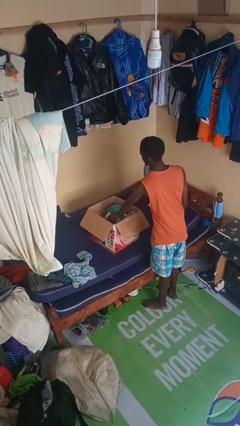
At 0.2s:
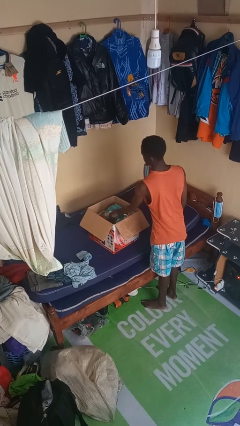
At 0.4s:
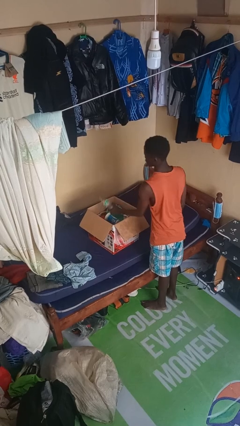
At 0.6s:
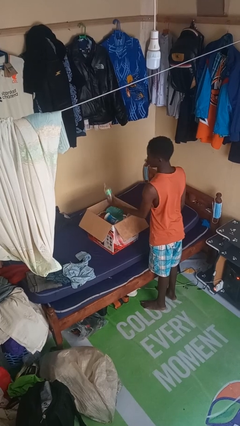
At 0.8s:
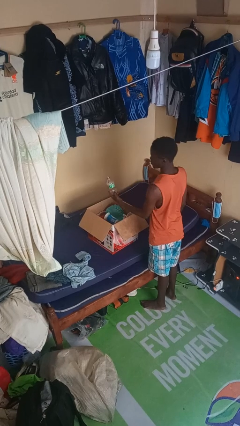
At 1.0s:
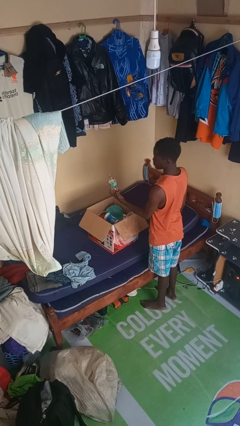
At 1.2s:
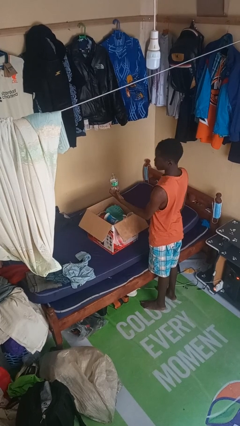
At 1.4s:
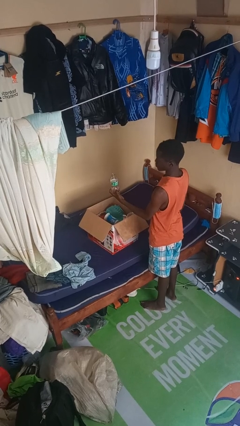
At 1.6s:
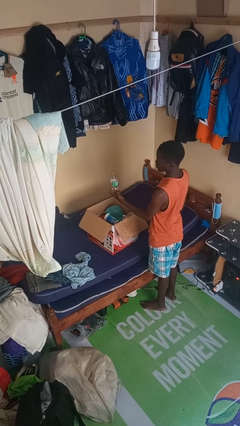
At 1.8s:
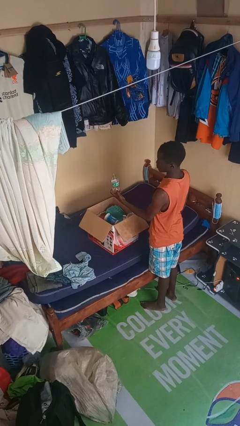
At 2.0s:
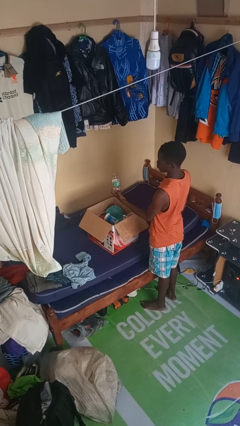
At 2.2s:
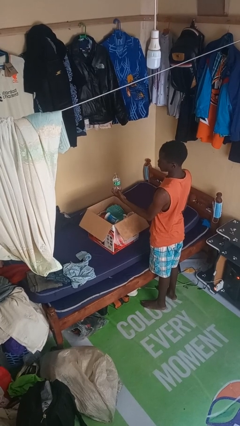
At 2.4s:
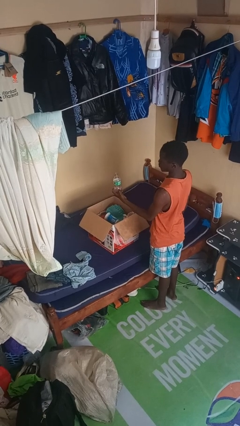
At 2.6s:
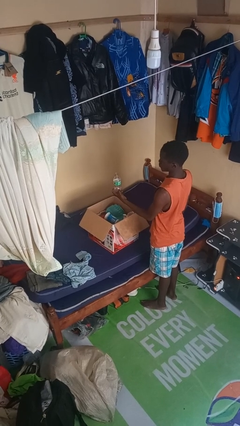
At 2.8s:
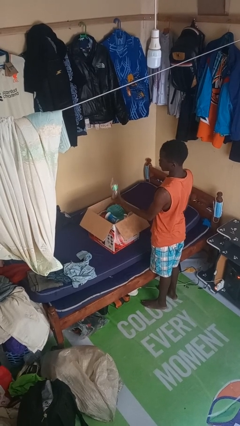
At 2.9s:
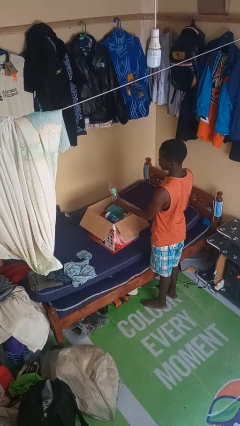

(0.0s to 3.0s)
person takes object from box

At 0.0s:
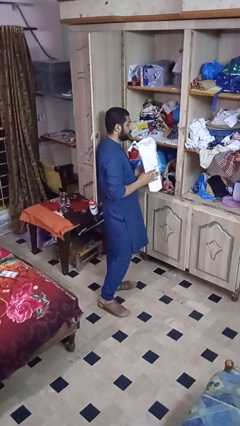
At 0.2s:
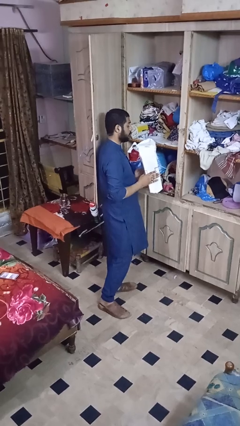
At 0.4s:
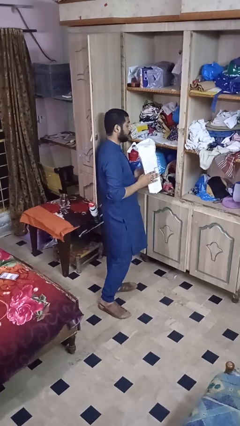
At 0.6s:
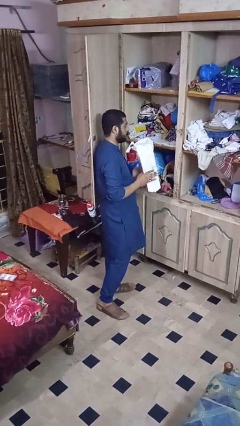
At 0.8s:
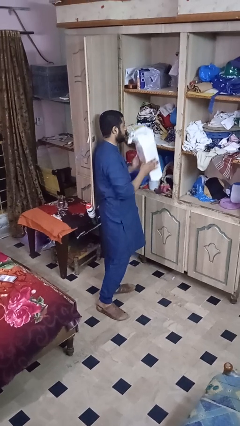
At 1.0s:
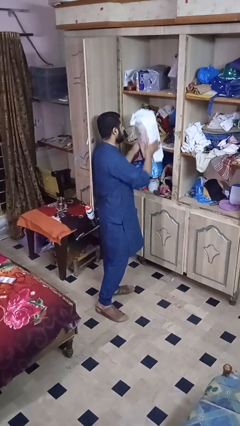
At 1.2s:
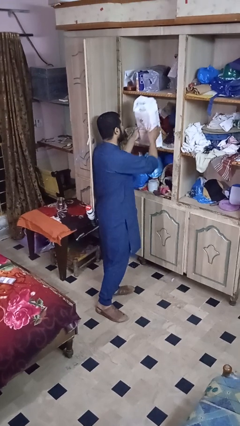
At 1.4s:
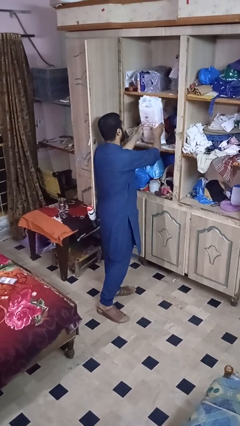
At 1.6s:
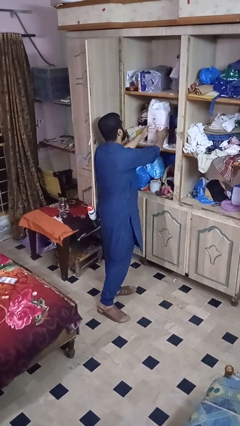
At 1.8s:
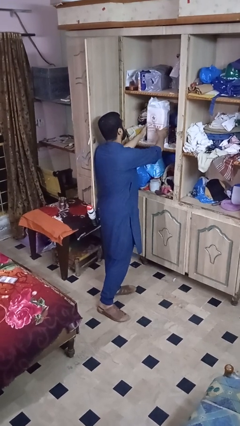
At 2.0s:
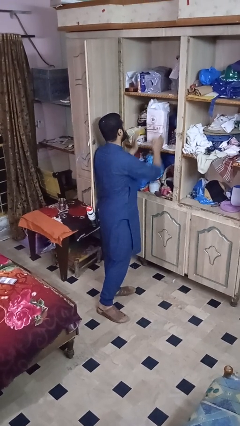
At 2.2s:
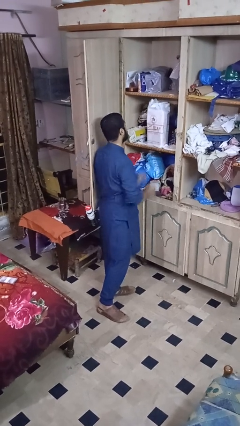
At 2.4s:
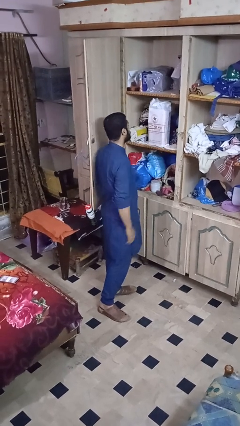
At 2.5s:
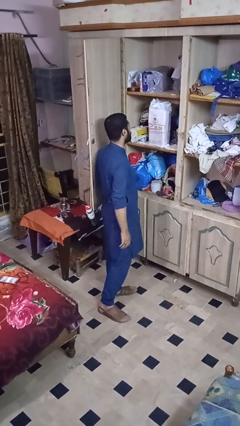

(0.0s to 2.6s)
person puts down object into cabinet

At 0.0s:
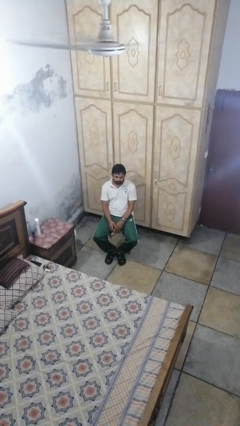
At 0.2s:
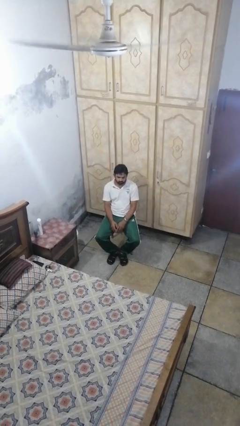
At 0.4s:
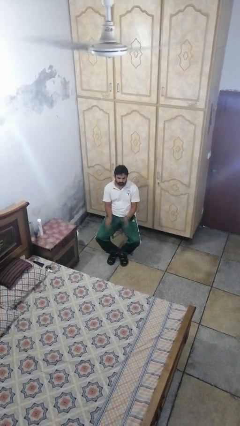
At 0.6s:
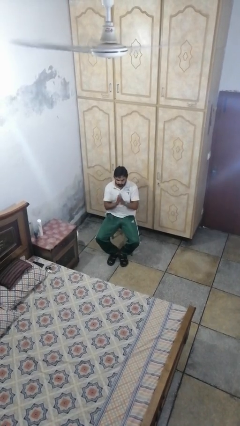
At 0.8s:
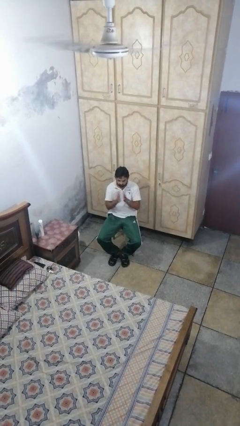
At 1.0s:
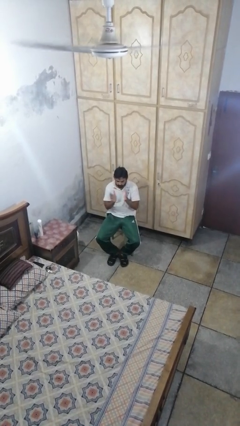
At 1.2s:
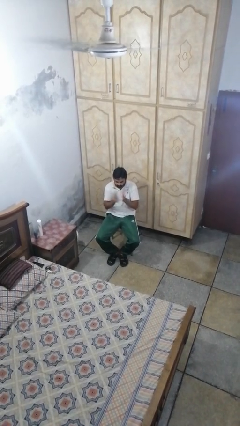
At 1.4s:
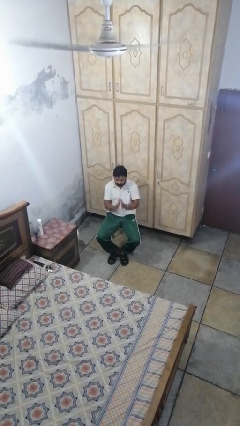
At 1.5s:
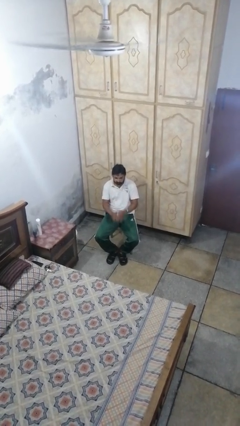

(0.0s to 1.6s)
person claps hands

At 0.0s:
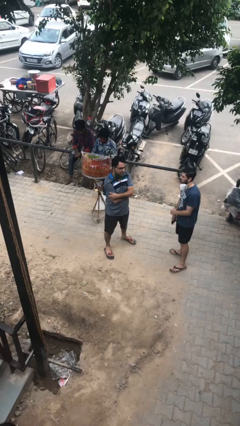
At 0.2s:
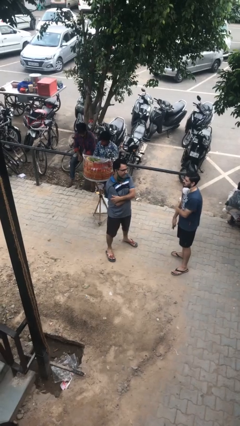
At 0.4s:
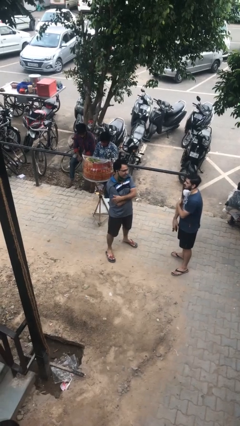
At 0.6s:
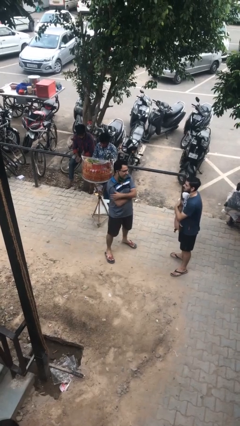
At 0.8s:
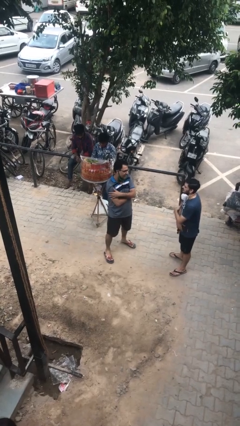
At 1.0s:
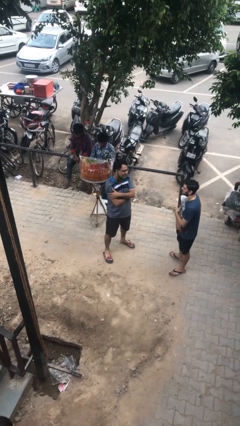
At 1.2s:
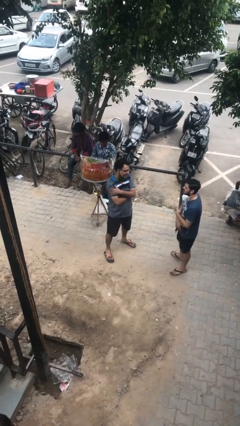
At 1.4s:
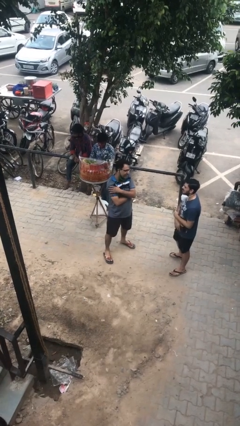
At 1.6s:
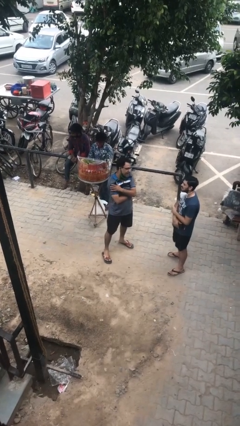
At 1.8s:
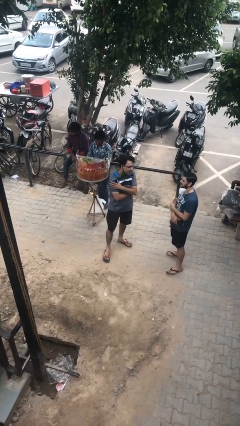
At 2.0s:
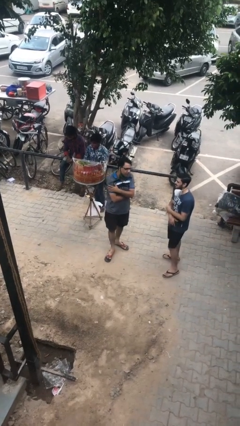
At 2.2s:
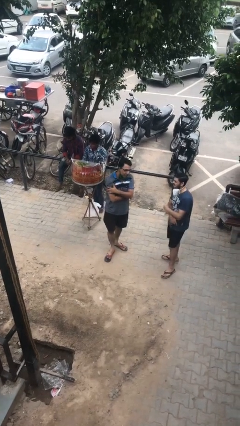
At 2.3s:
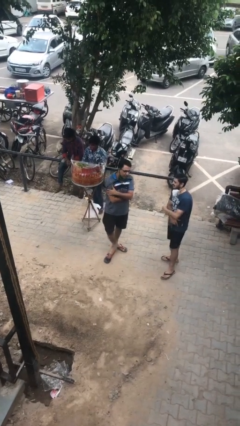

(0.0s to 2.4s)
person laughs with person

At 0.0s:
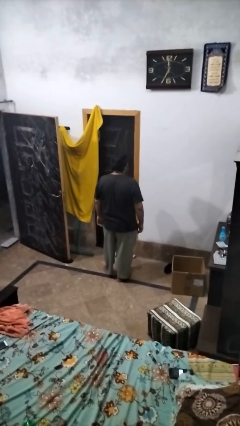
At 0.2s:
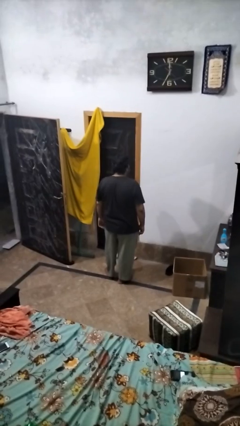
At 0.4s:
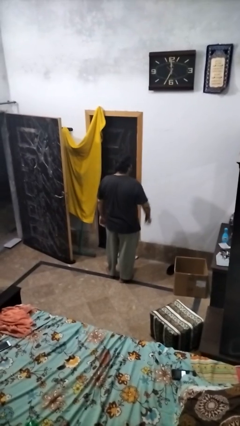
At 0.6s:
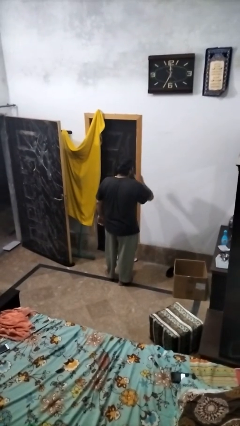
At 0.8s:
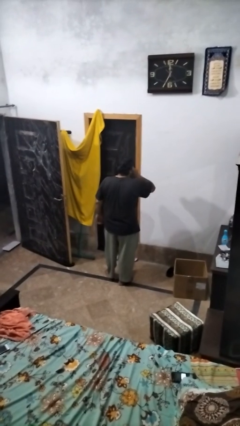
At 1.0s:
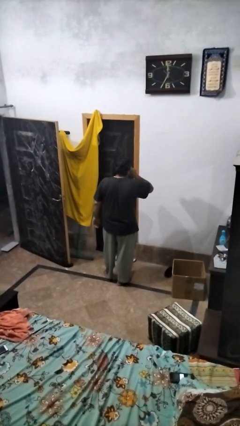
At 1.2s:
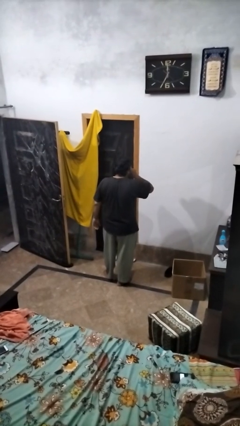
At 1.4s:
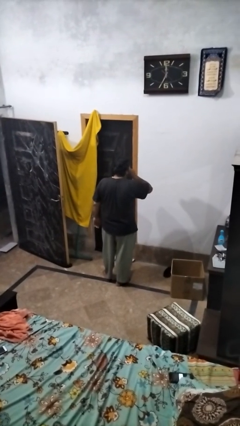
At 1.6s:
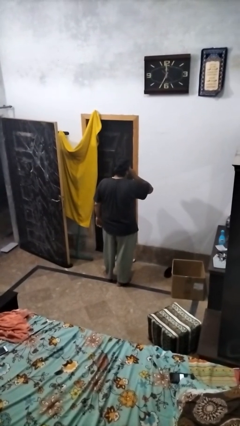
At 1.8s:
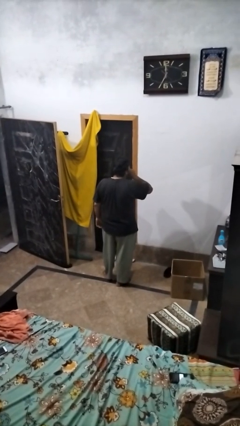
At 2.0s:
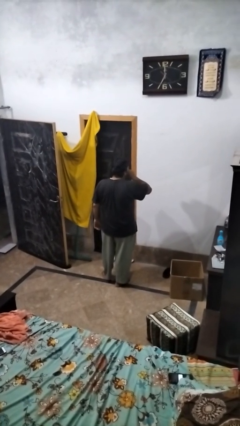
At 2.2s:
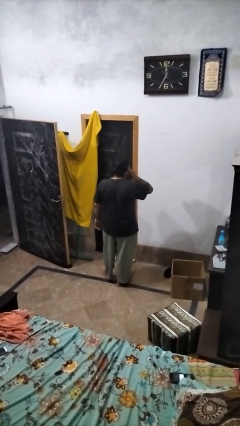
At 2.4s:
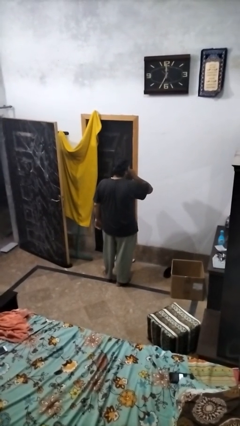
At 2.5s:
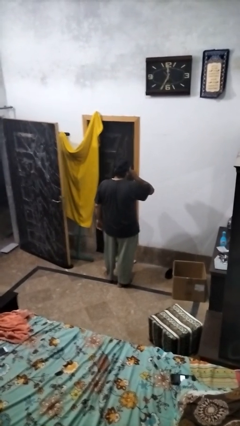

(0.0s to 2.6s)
person gestures be quiet

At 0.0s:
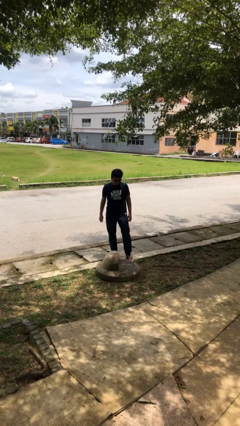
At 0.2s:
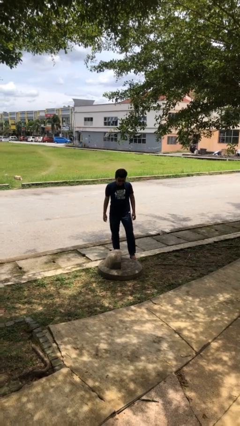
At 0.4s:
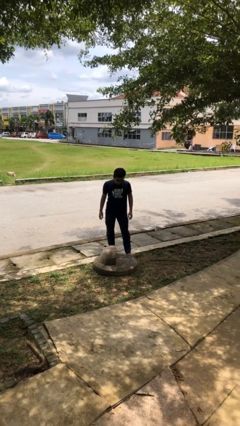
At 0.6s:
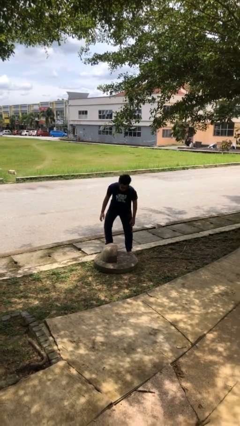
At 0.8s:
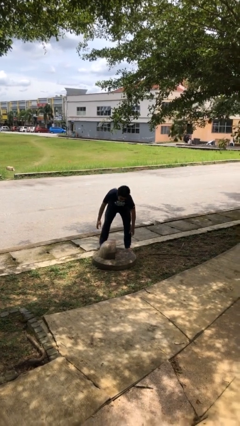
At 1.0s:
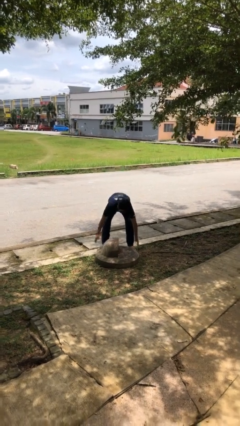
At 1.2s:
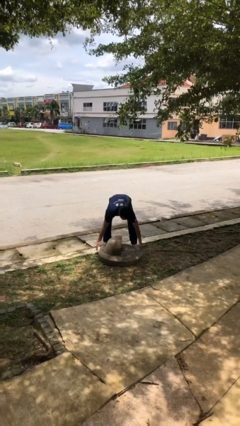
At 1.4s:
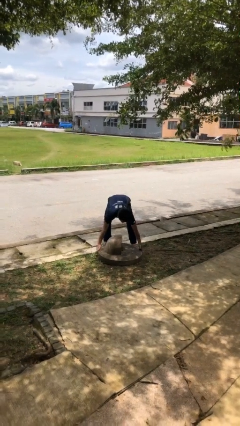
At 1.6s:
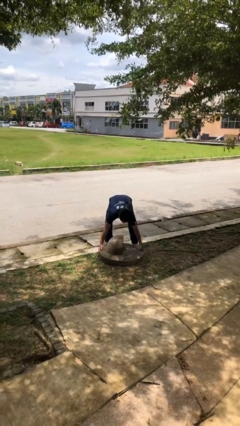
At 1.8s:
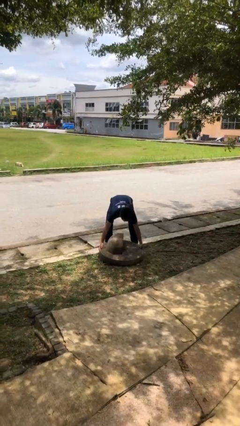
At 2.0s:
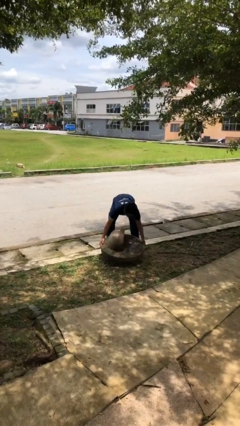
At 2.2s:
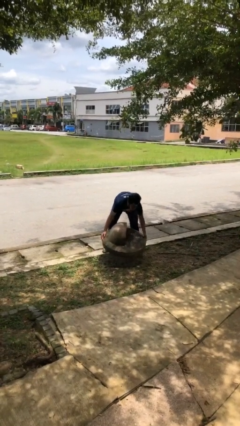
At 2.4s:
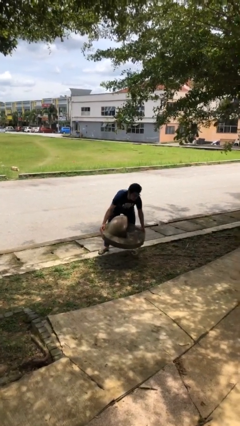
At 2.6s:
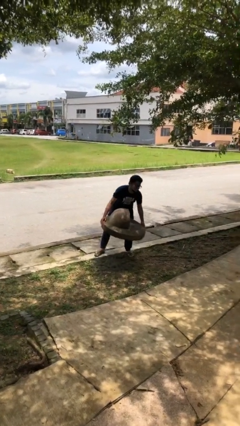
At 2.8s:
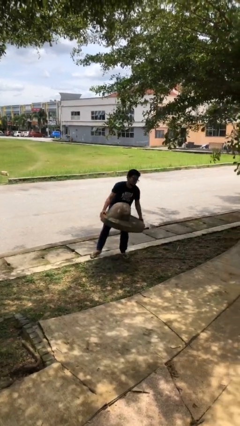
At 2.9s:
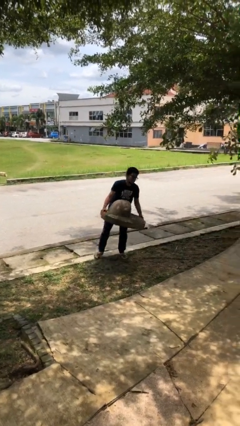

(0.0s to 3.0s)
person picks up object from floor

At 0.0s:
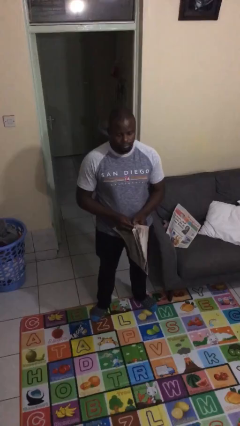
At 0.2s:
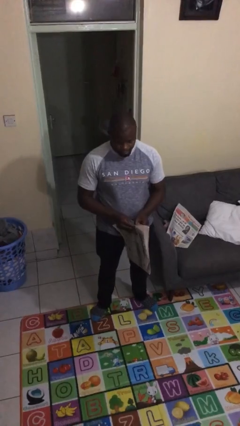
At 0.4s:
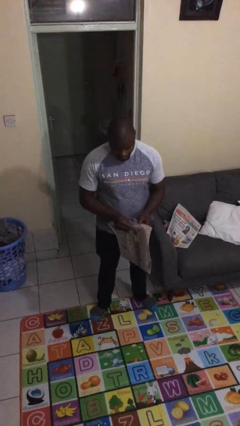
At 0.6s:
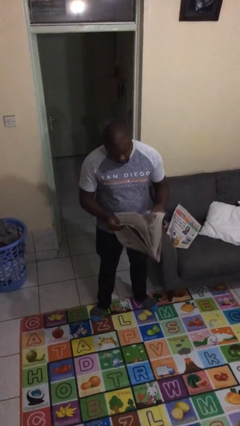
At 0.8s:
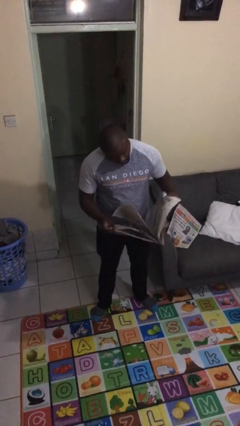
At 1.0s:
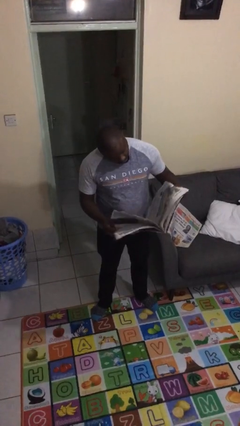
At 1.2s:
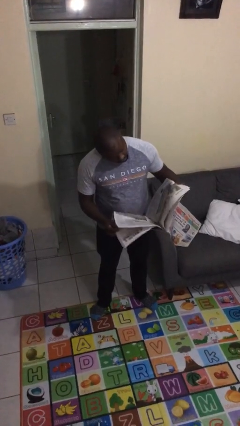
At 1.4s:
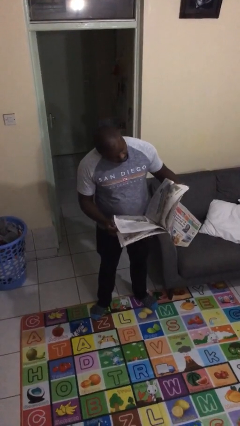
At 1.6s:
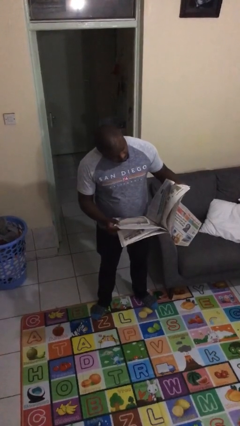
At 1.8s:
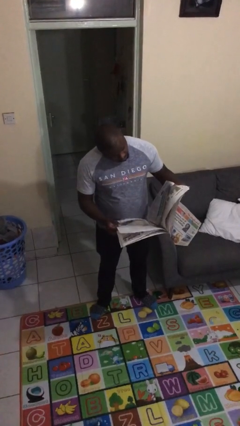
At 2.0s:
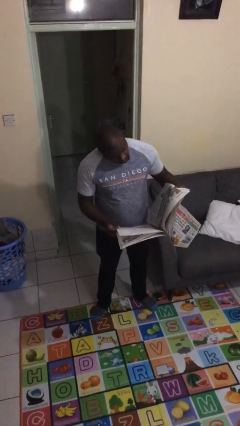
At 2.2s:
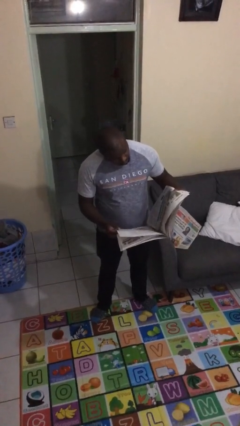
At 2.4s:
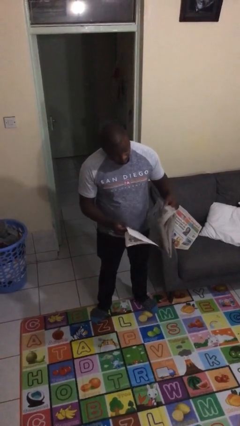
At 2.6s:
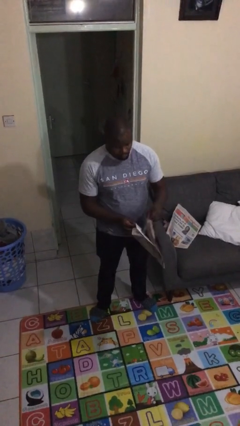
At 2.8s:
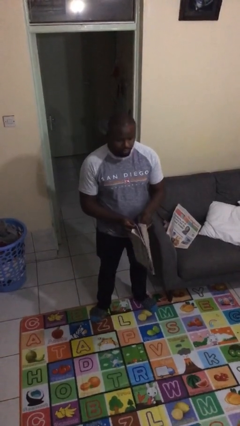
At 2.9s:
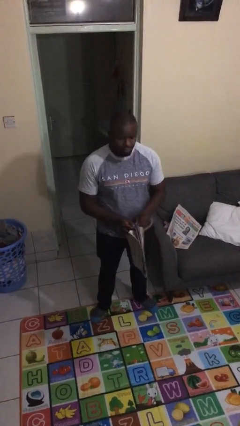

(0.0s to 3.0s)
person reads newspaper
